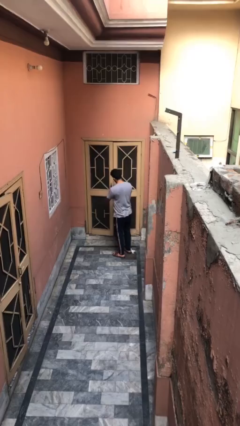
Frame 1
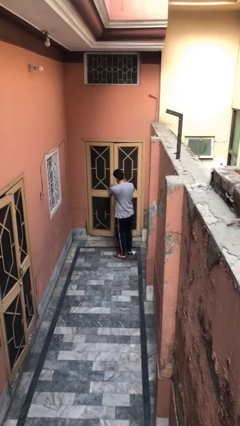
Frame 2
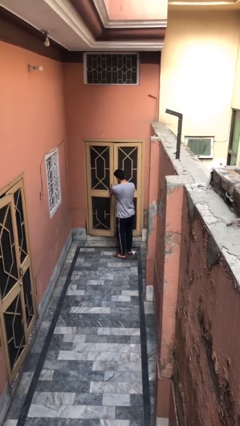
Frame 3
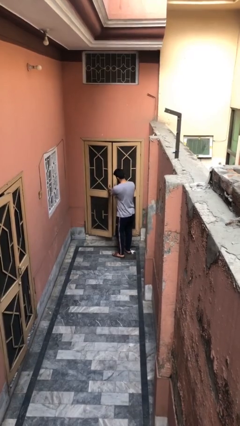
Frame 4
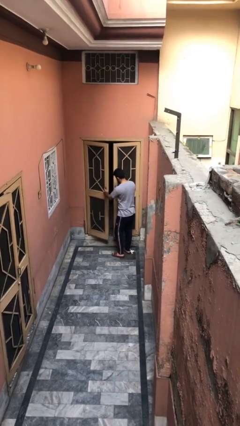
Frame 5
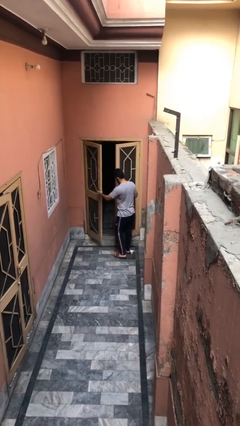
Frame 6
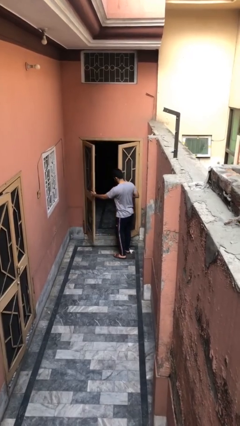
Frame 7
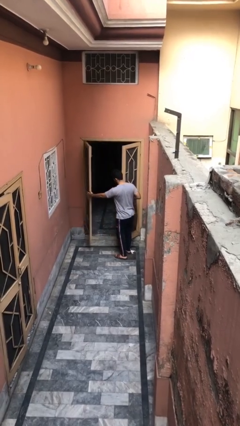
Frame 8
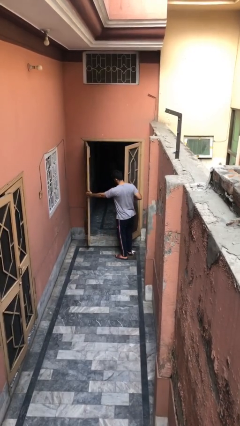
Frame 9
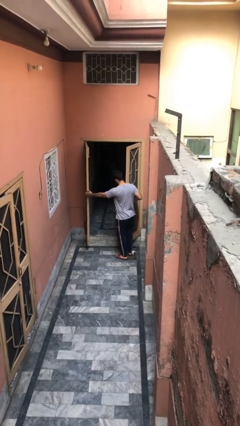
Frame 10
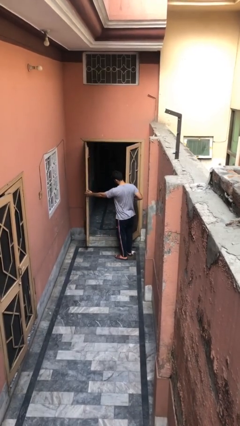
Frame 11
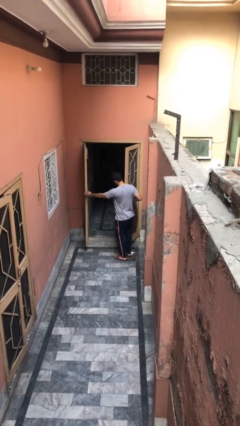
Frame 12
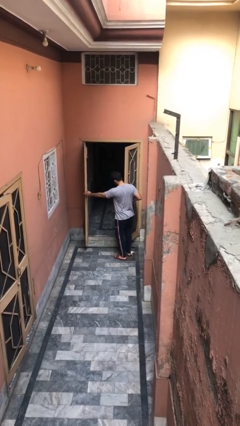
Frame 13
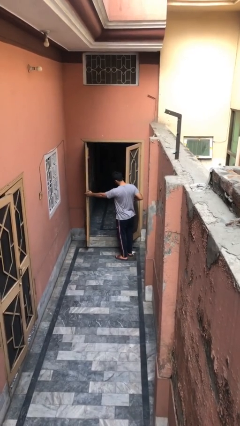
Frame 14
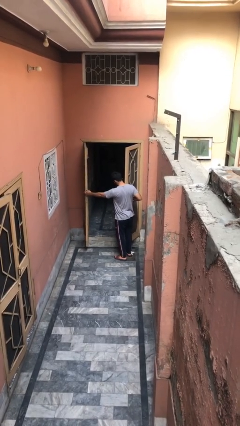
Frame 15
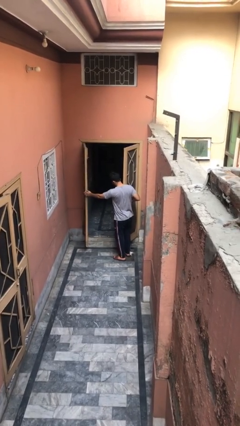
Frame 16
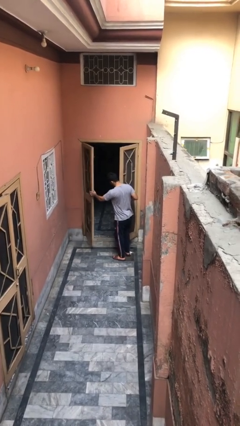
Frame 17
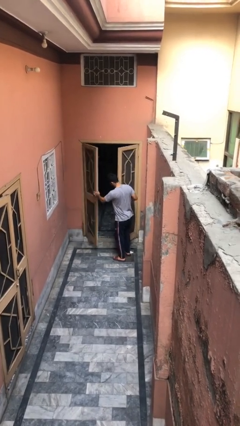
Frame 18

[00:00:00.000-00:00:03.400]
person opens gate

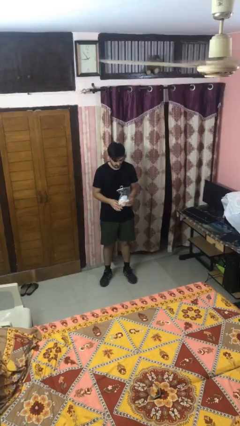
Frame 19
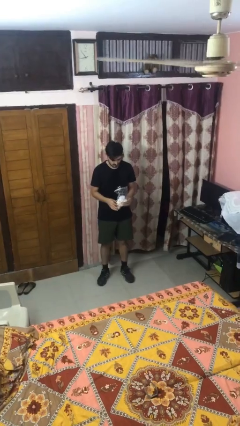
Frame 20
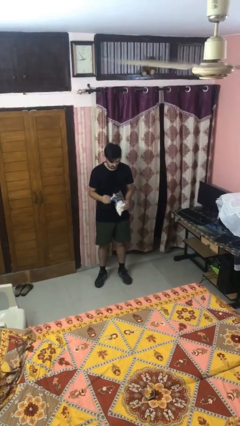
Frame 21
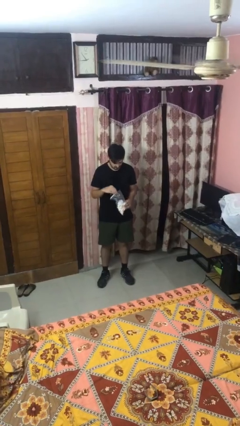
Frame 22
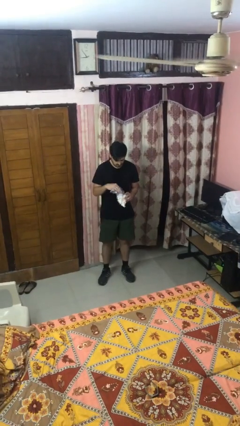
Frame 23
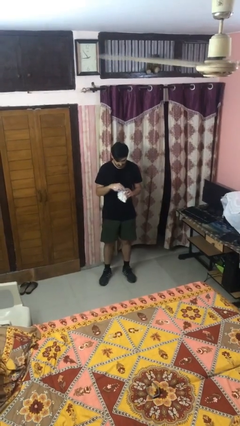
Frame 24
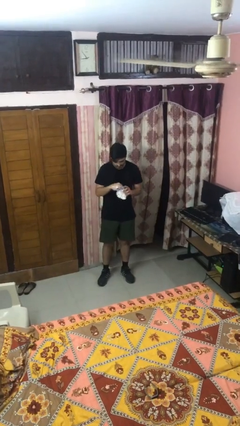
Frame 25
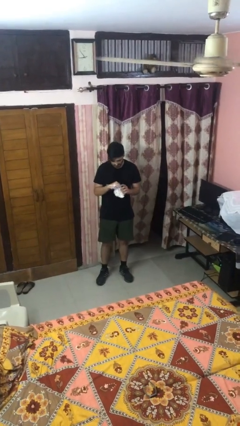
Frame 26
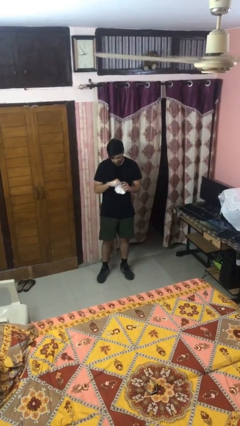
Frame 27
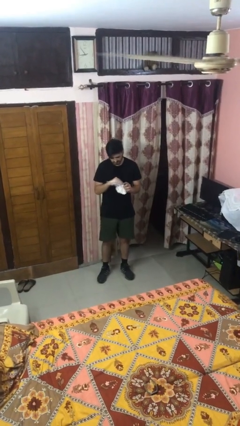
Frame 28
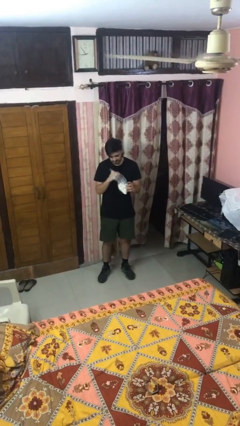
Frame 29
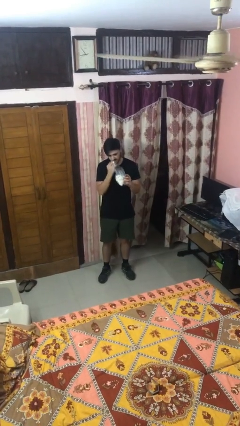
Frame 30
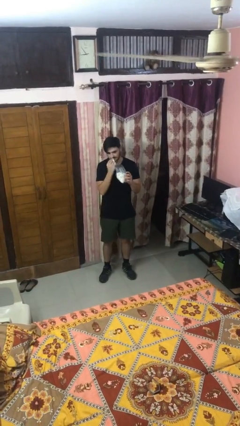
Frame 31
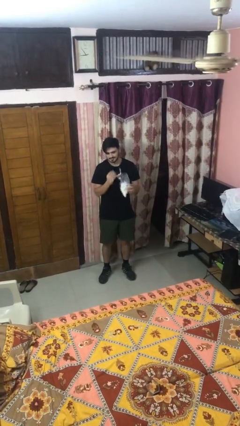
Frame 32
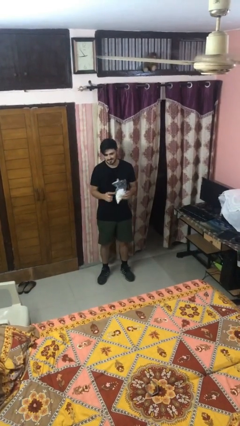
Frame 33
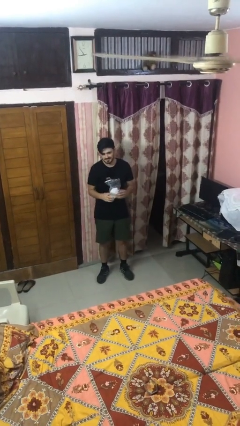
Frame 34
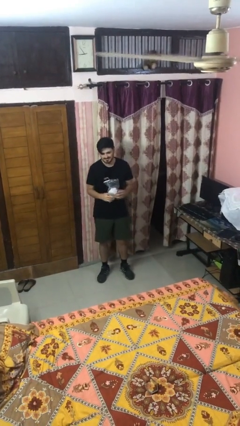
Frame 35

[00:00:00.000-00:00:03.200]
person eats snack from bag

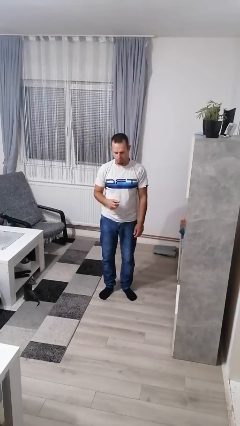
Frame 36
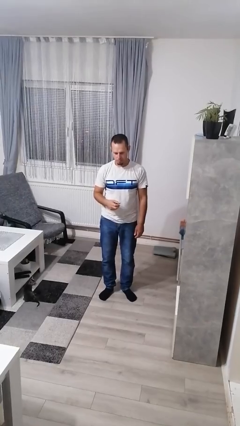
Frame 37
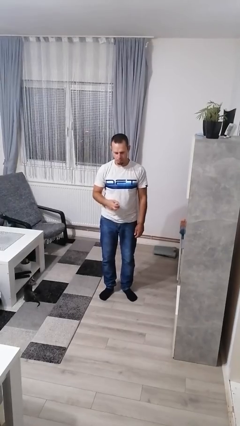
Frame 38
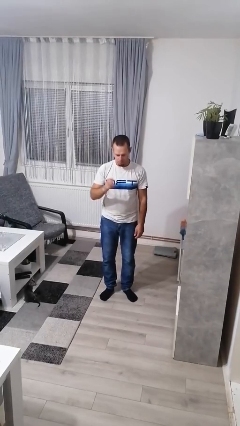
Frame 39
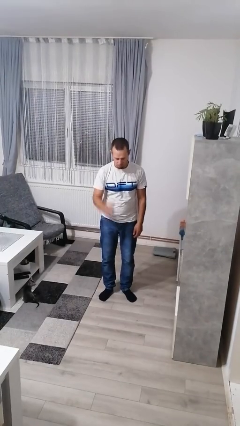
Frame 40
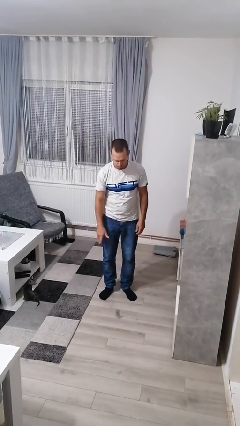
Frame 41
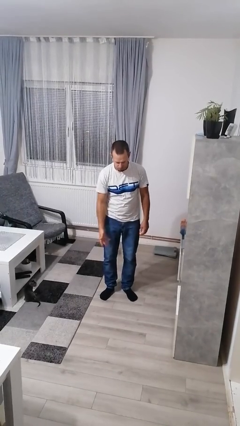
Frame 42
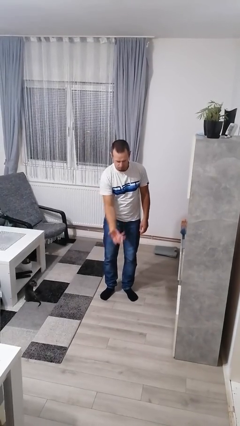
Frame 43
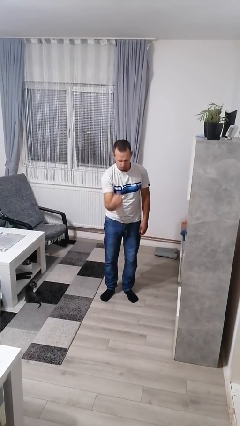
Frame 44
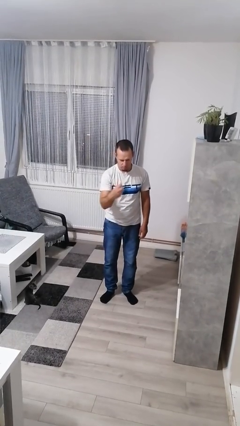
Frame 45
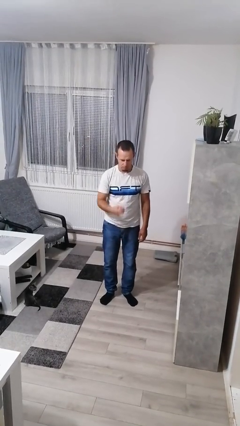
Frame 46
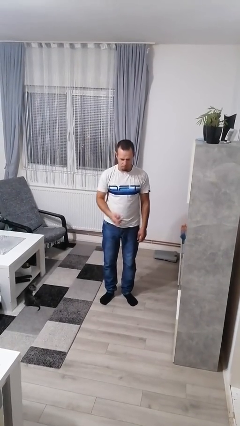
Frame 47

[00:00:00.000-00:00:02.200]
person bounces ball on floor

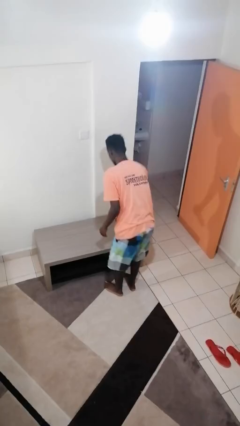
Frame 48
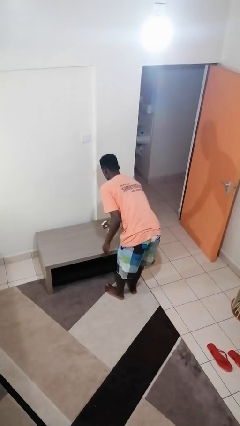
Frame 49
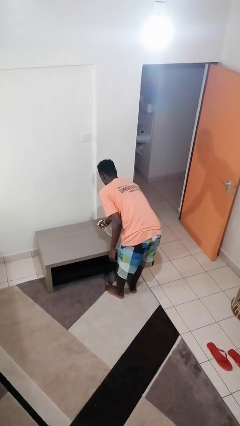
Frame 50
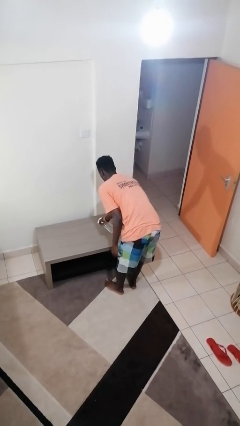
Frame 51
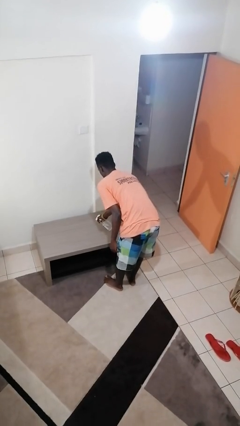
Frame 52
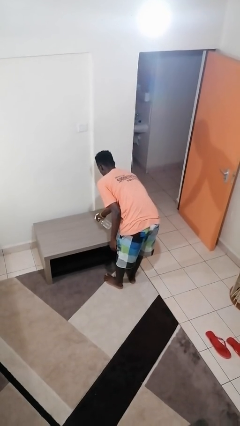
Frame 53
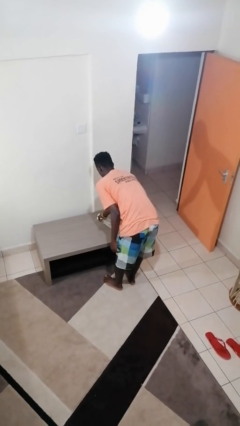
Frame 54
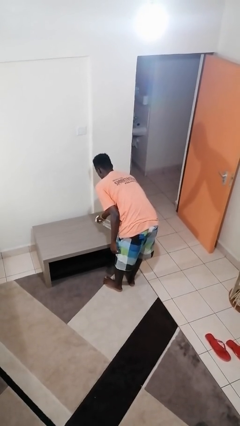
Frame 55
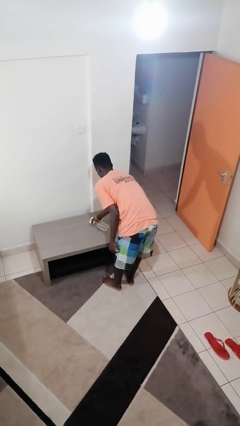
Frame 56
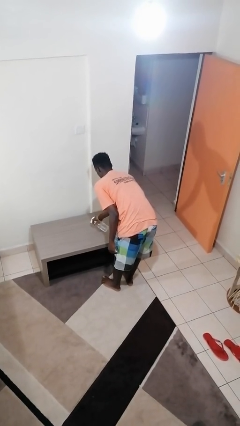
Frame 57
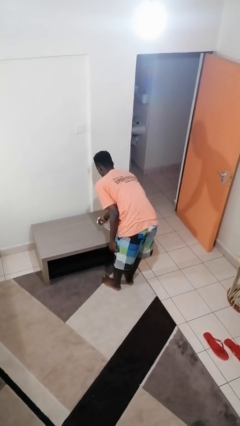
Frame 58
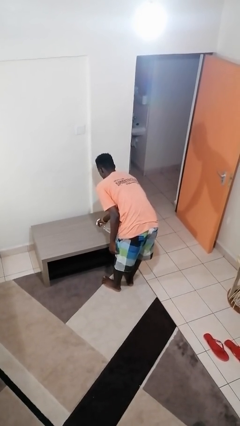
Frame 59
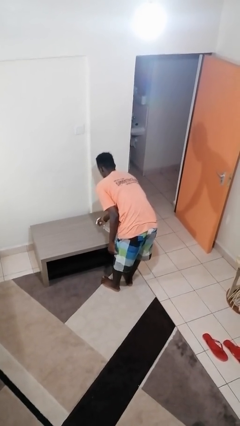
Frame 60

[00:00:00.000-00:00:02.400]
person sprays from bottle

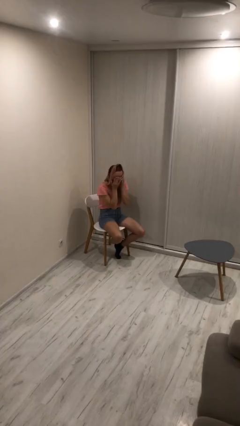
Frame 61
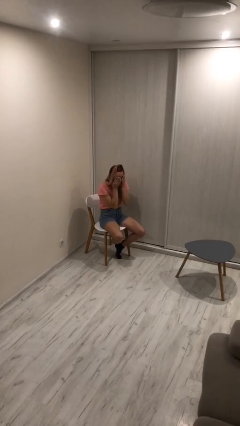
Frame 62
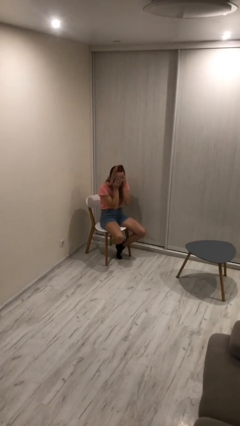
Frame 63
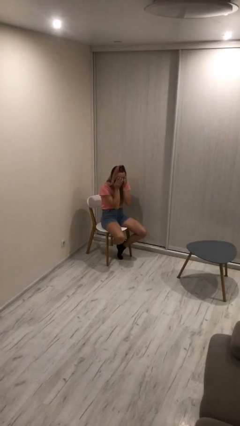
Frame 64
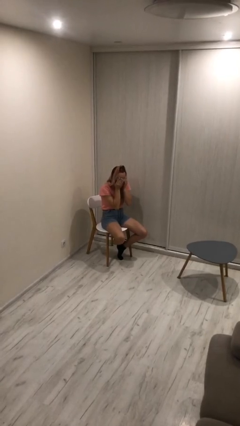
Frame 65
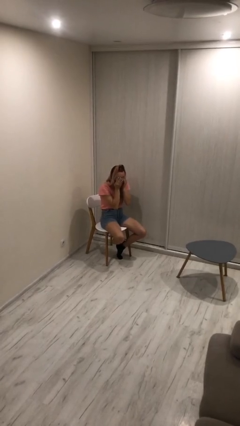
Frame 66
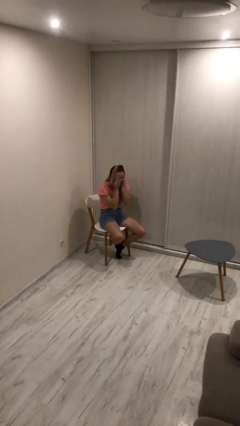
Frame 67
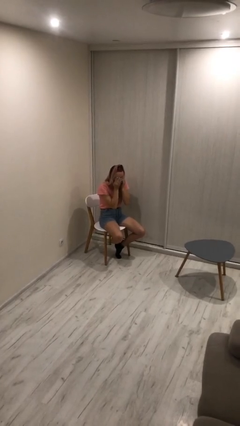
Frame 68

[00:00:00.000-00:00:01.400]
person rubs eyes

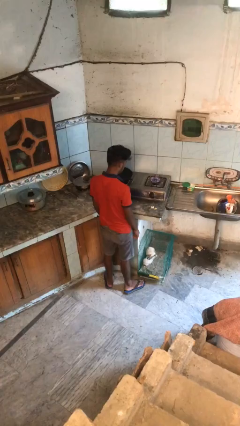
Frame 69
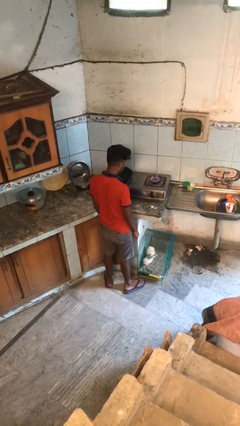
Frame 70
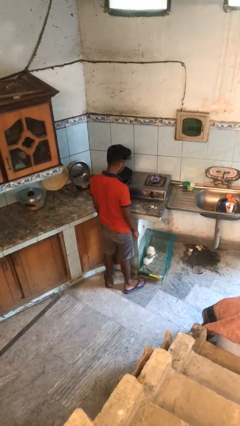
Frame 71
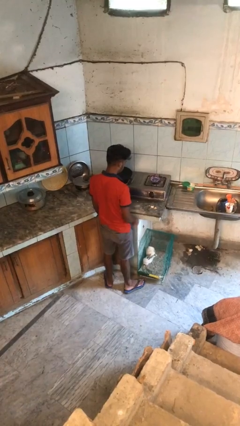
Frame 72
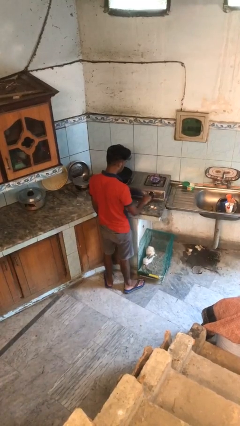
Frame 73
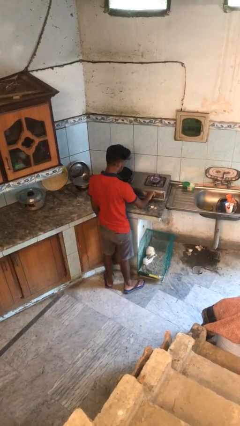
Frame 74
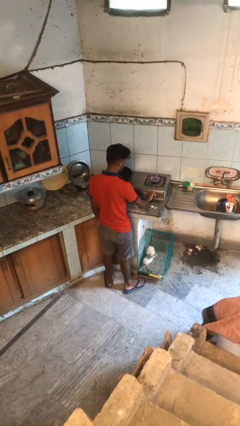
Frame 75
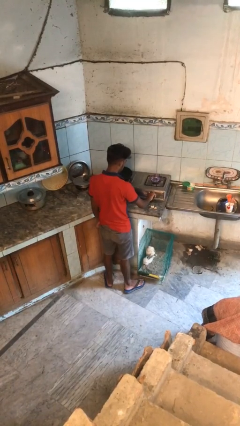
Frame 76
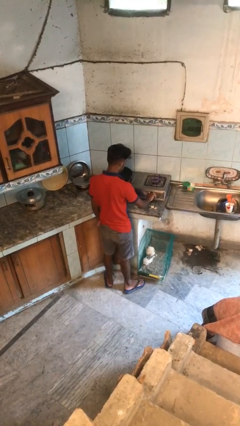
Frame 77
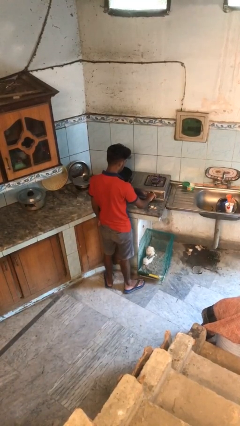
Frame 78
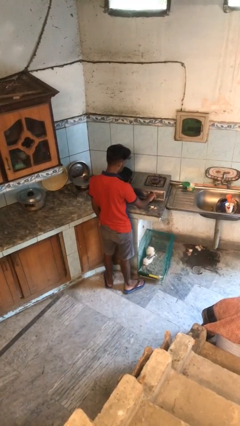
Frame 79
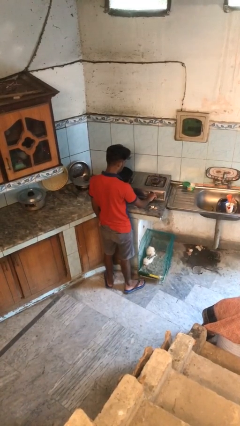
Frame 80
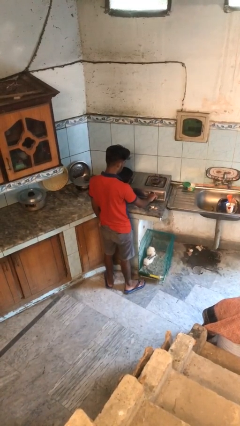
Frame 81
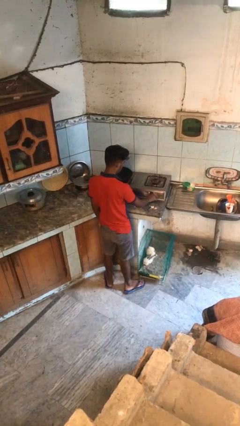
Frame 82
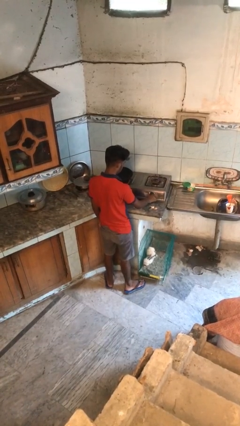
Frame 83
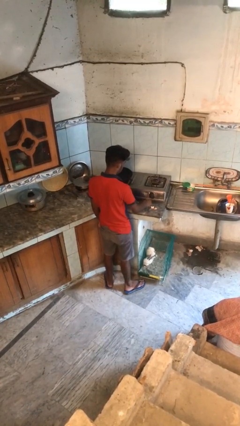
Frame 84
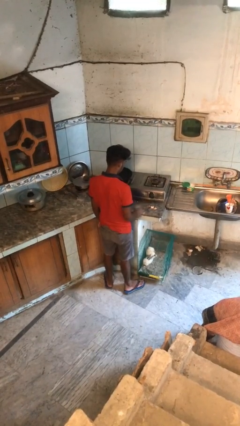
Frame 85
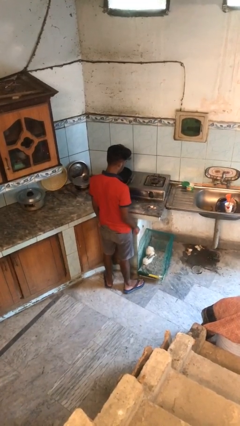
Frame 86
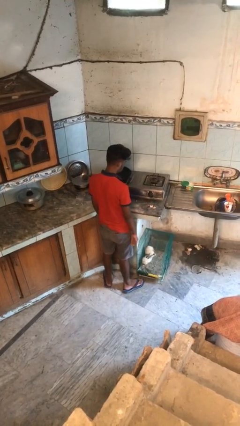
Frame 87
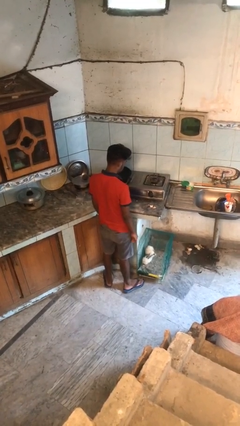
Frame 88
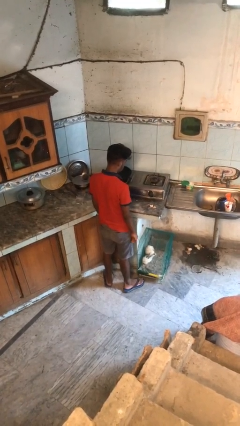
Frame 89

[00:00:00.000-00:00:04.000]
person turns off stovetop

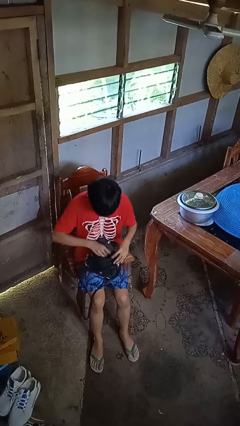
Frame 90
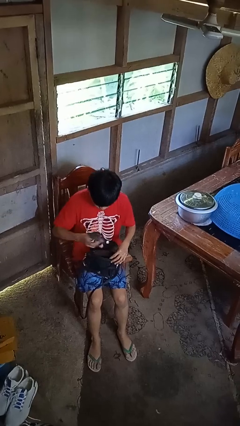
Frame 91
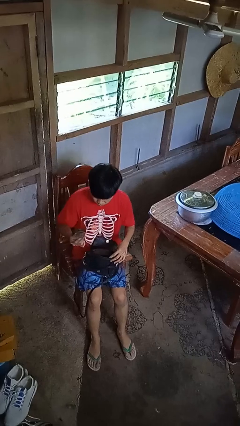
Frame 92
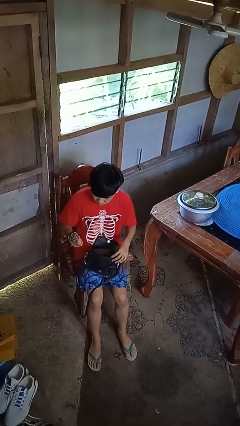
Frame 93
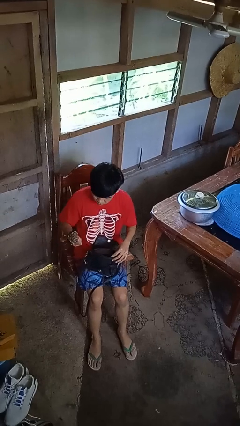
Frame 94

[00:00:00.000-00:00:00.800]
person takes object from purse
